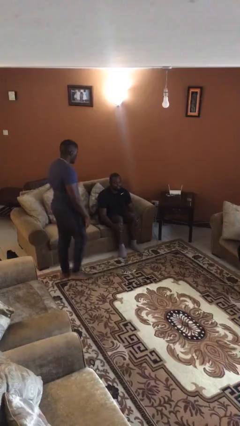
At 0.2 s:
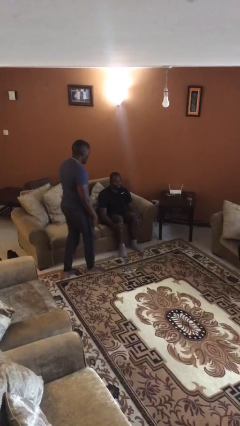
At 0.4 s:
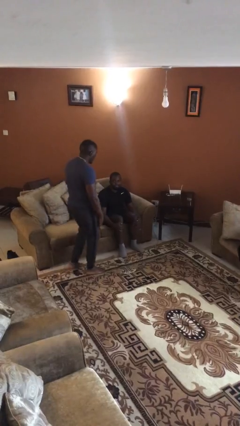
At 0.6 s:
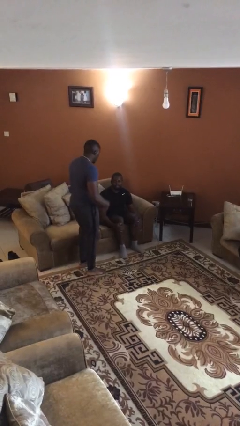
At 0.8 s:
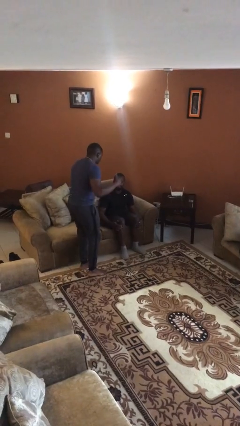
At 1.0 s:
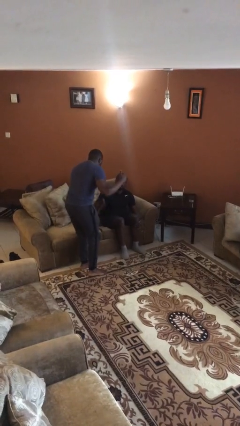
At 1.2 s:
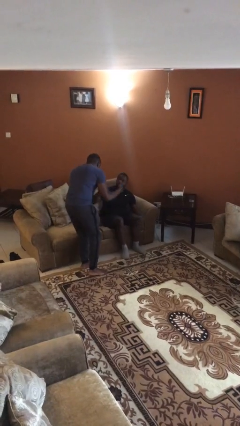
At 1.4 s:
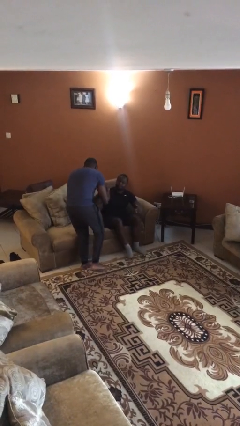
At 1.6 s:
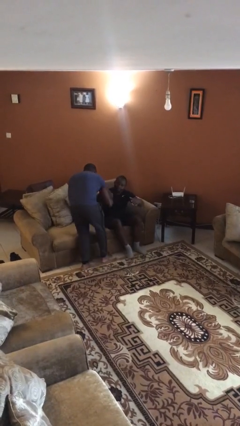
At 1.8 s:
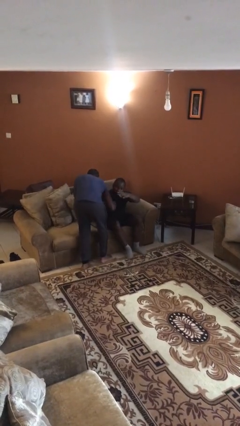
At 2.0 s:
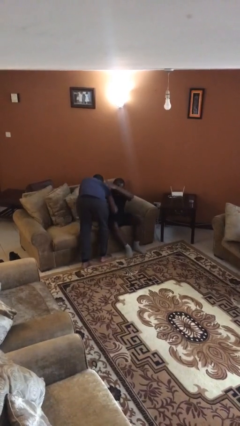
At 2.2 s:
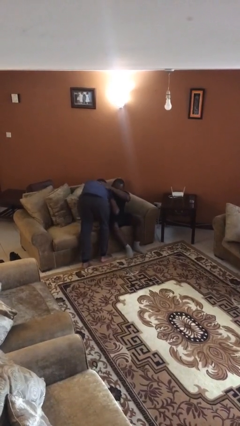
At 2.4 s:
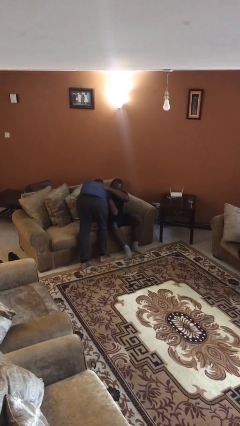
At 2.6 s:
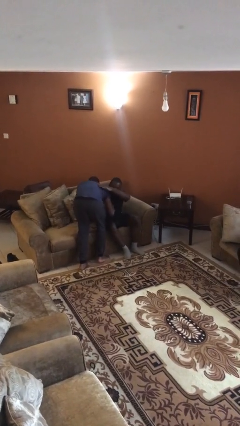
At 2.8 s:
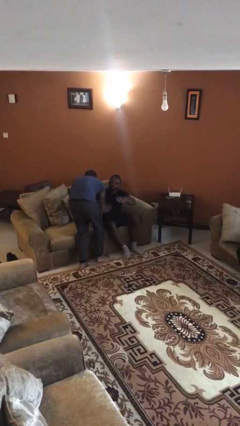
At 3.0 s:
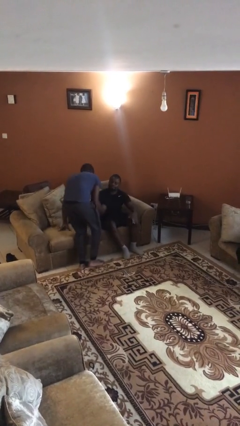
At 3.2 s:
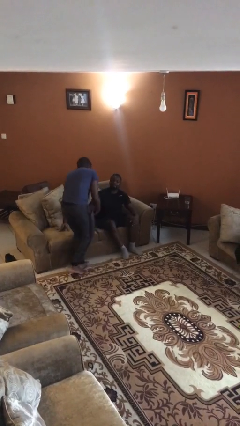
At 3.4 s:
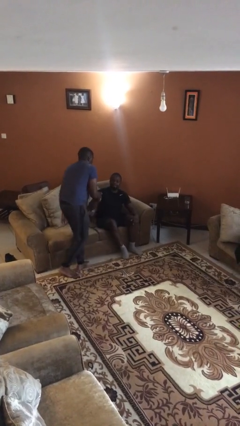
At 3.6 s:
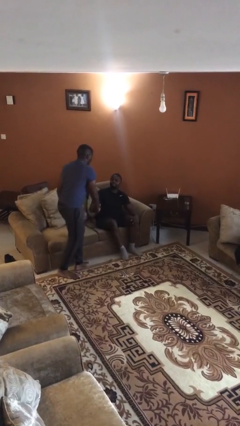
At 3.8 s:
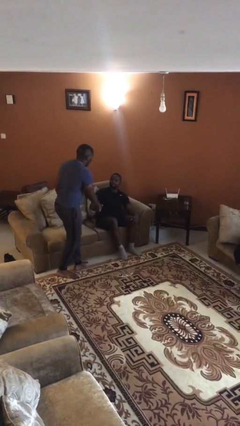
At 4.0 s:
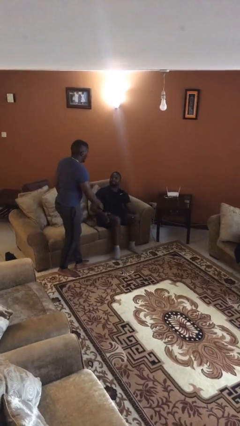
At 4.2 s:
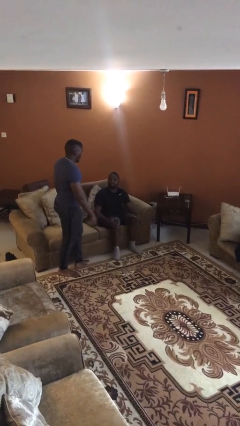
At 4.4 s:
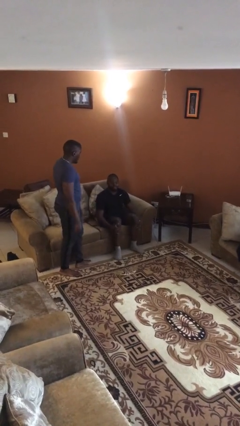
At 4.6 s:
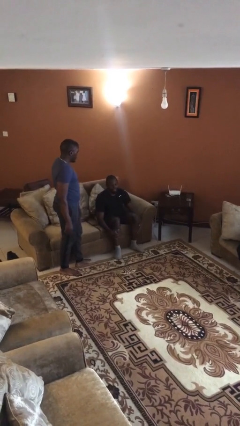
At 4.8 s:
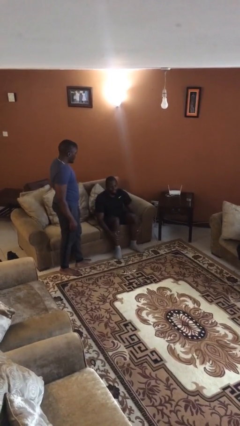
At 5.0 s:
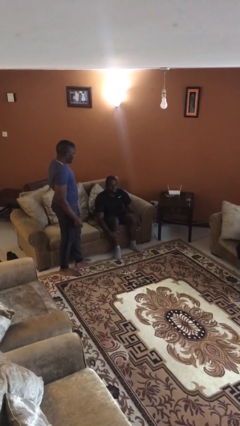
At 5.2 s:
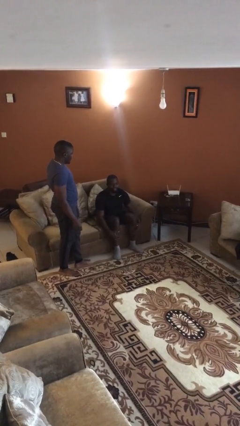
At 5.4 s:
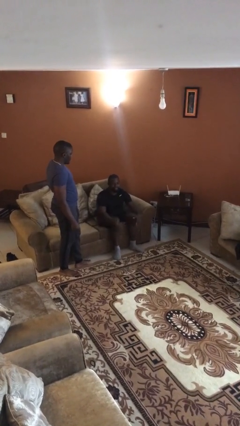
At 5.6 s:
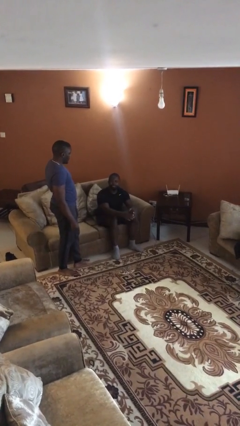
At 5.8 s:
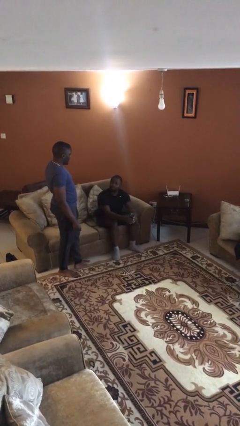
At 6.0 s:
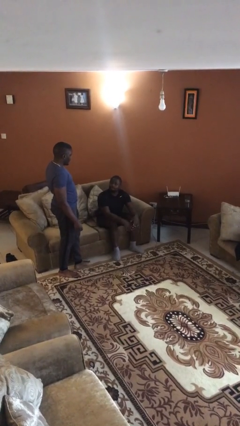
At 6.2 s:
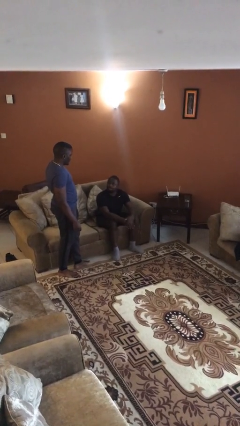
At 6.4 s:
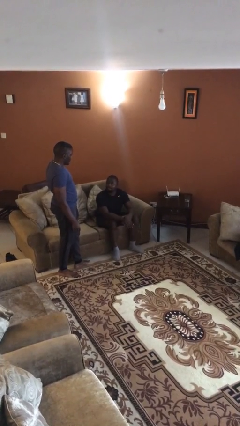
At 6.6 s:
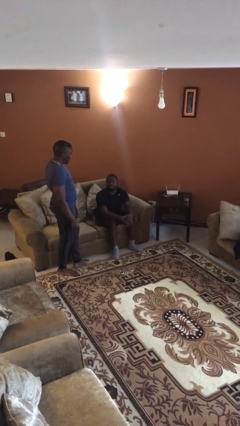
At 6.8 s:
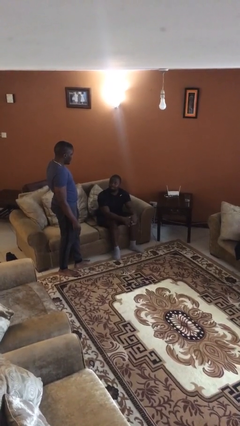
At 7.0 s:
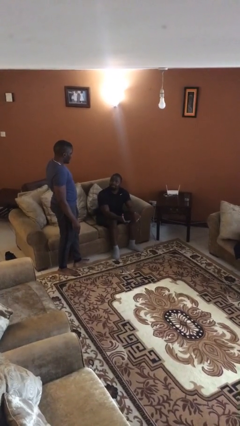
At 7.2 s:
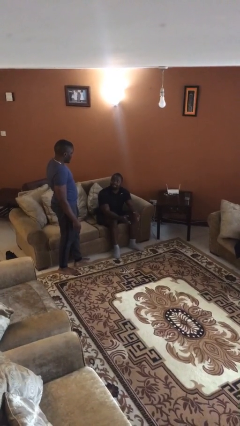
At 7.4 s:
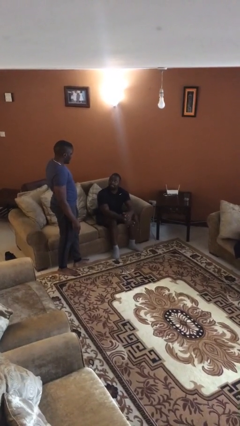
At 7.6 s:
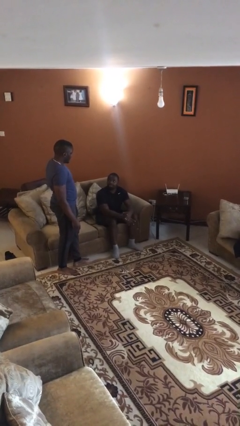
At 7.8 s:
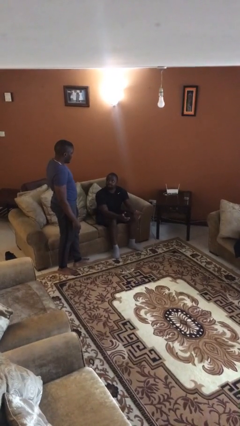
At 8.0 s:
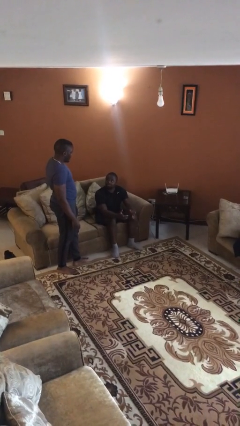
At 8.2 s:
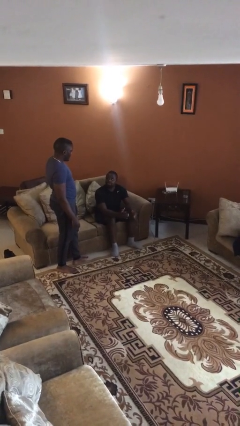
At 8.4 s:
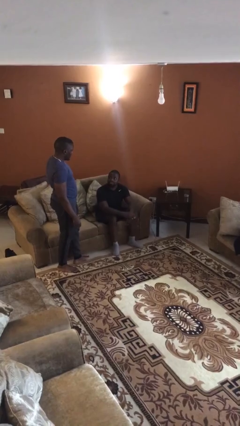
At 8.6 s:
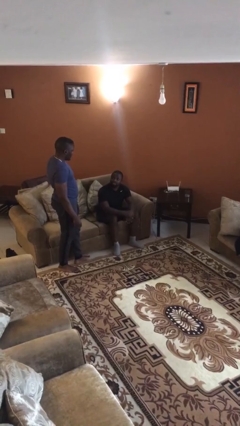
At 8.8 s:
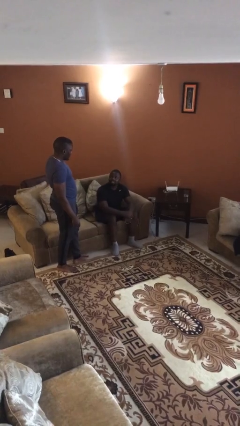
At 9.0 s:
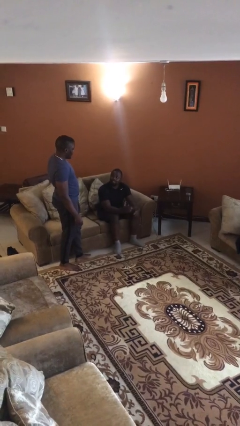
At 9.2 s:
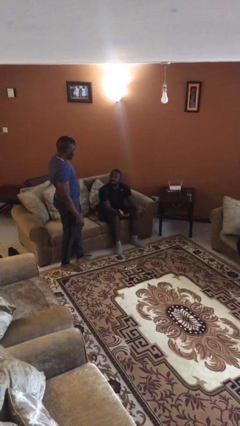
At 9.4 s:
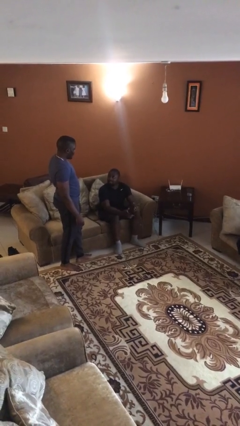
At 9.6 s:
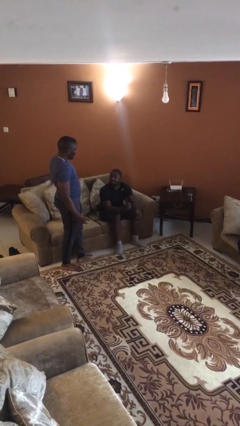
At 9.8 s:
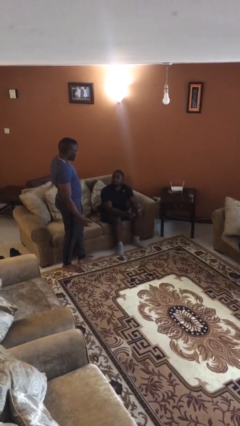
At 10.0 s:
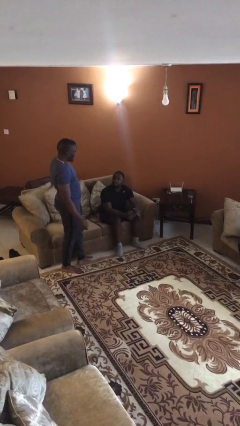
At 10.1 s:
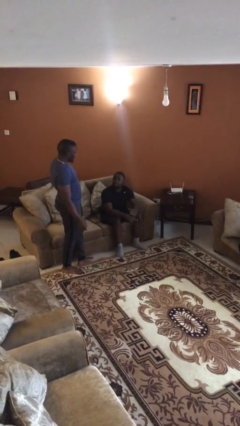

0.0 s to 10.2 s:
person embraces person

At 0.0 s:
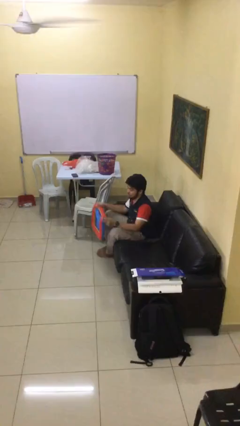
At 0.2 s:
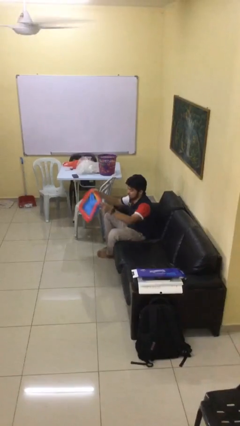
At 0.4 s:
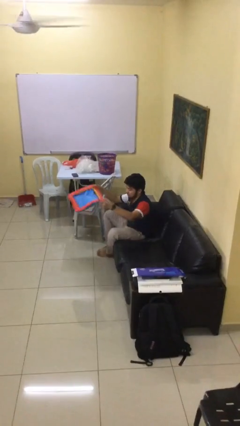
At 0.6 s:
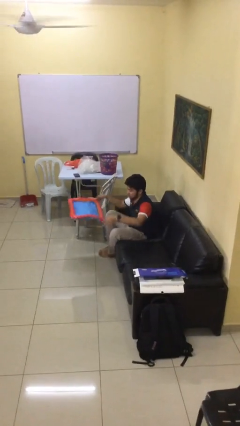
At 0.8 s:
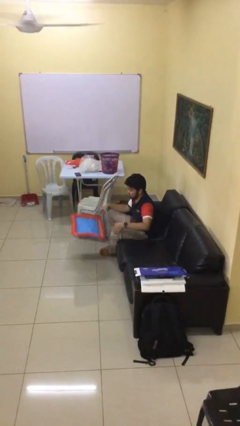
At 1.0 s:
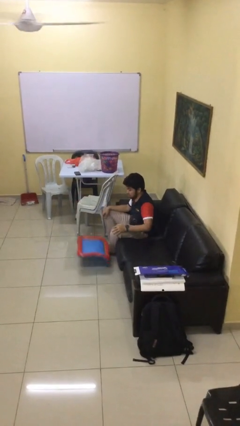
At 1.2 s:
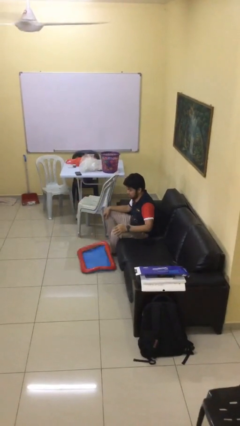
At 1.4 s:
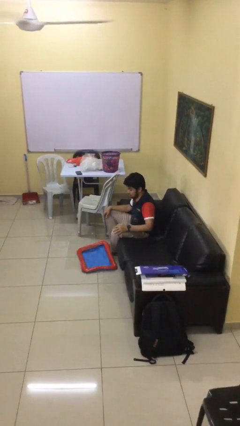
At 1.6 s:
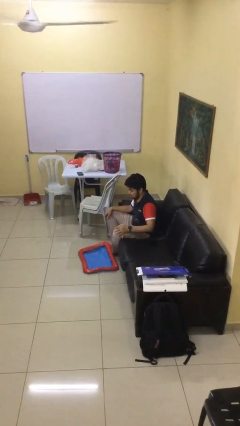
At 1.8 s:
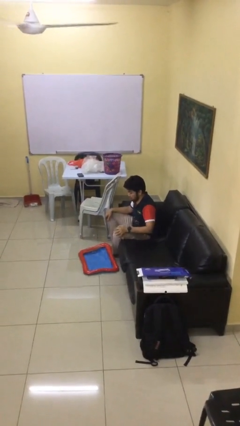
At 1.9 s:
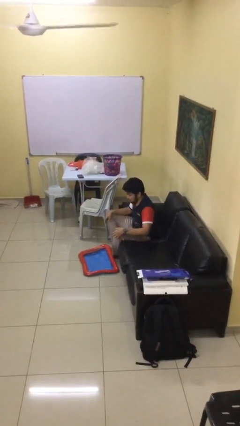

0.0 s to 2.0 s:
person drops object

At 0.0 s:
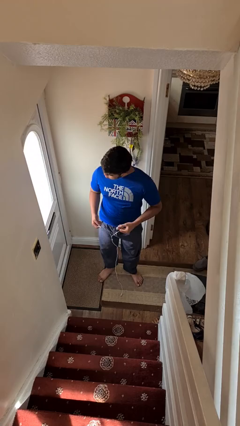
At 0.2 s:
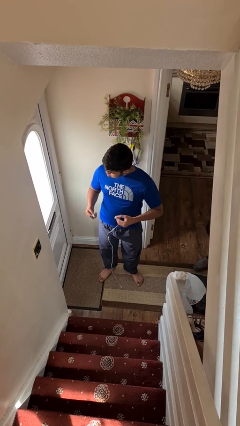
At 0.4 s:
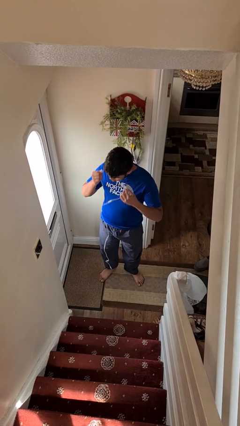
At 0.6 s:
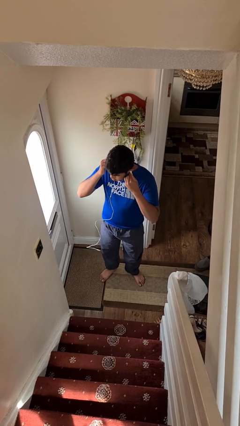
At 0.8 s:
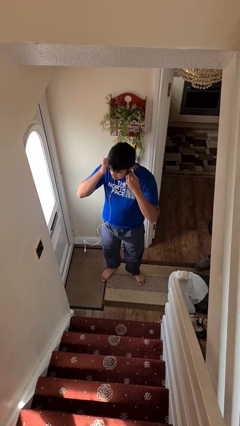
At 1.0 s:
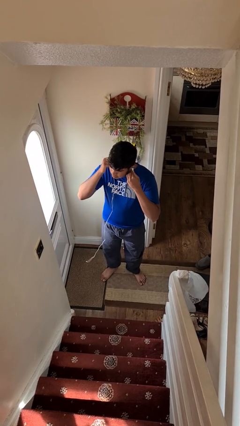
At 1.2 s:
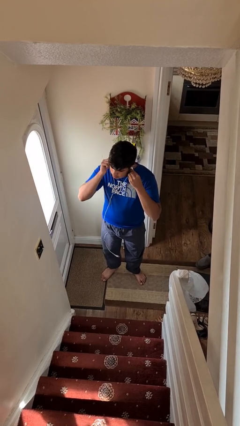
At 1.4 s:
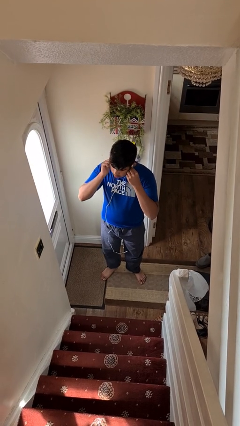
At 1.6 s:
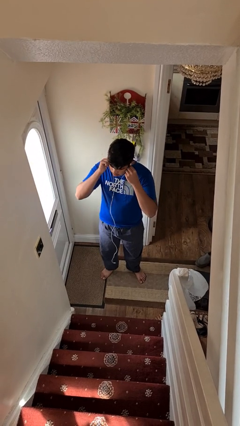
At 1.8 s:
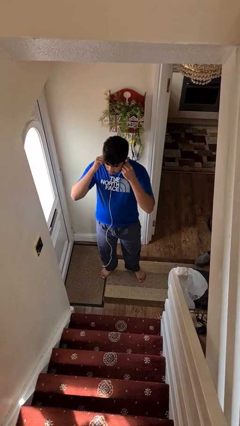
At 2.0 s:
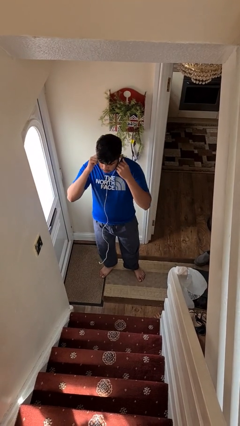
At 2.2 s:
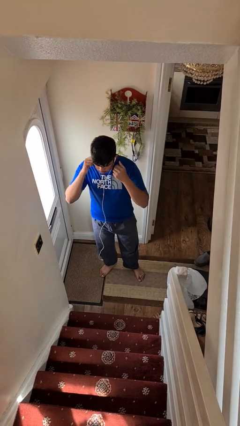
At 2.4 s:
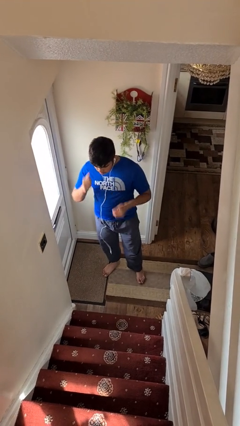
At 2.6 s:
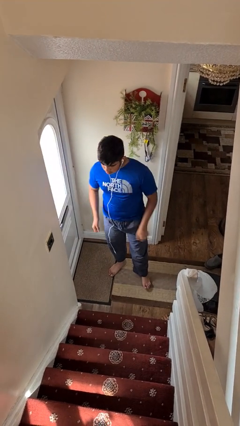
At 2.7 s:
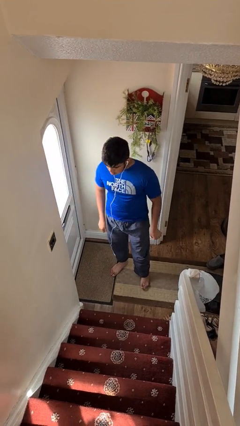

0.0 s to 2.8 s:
person puts on headphones

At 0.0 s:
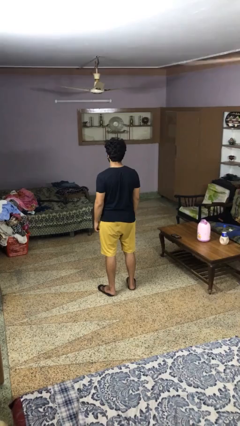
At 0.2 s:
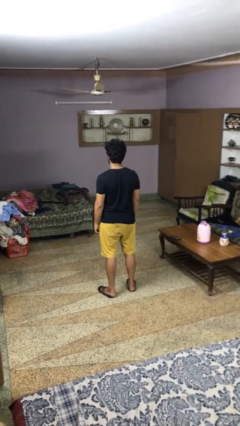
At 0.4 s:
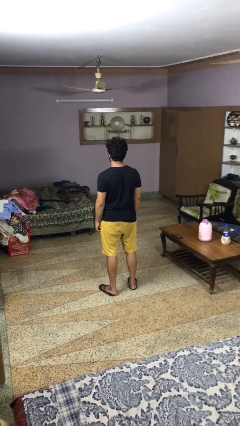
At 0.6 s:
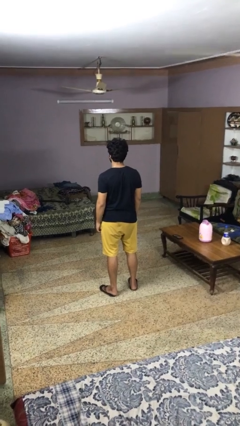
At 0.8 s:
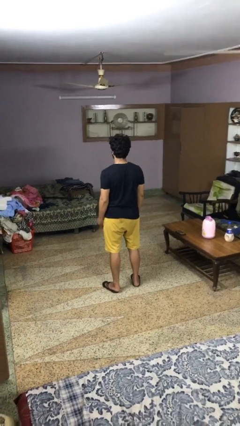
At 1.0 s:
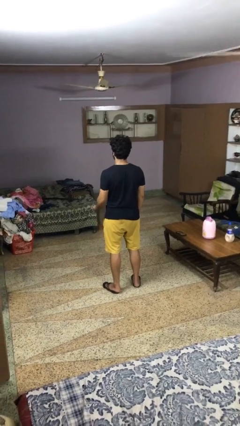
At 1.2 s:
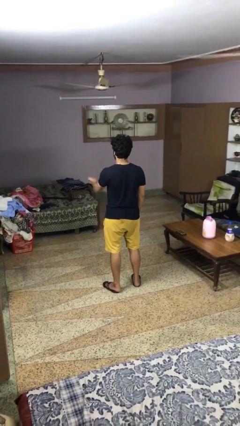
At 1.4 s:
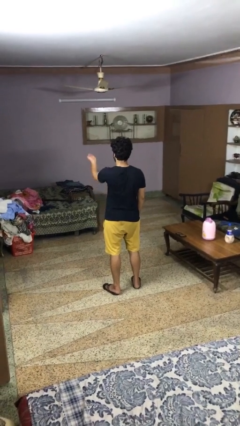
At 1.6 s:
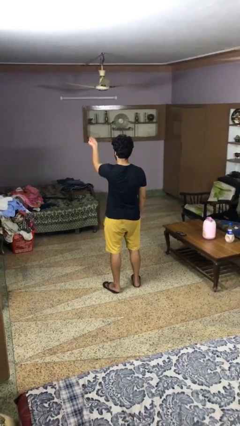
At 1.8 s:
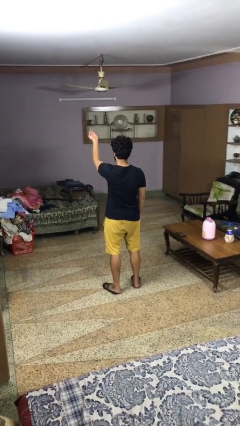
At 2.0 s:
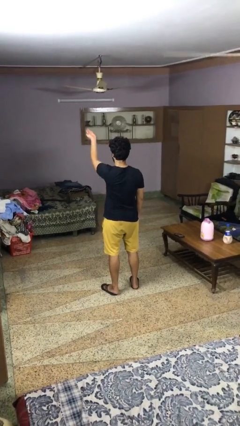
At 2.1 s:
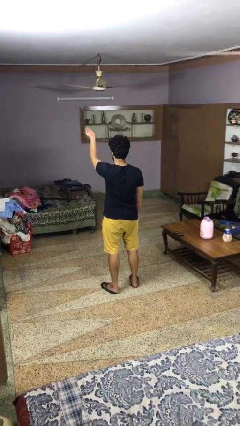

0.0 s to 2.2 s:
person gestures swipe up

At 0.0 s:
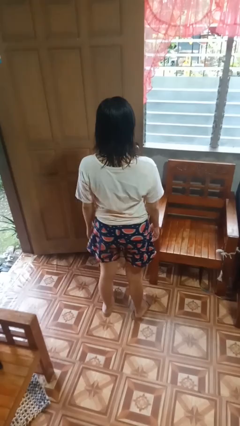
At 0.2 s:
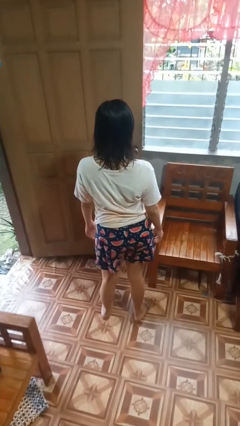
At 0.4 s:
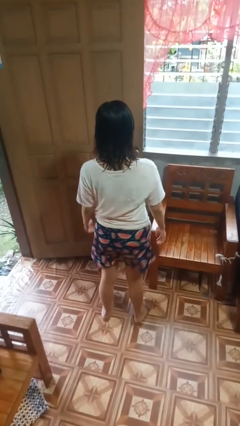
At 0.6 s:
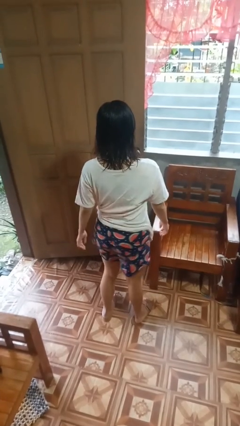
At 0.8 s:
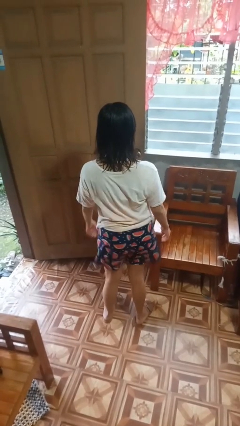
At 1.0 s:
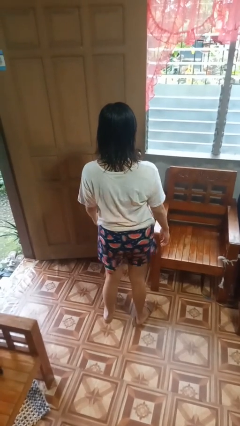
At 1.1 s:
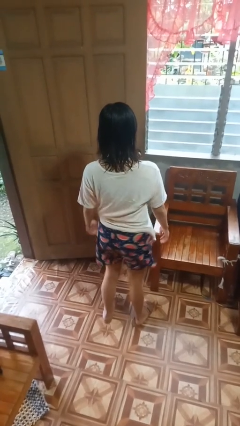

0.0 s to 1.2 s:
person wiggles hips
